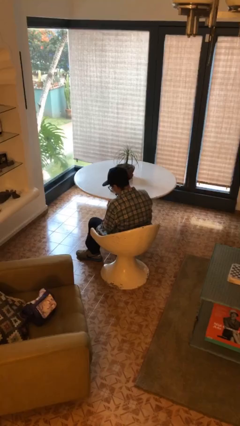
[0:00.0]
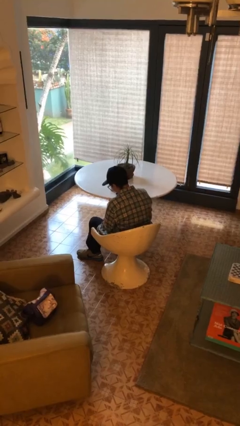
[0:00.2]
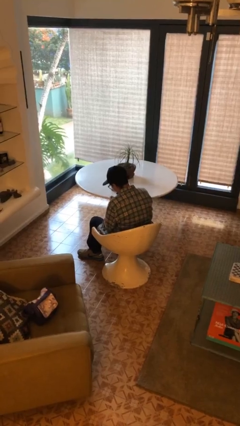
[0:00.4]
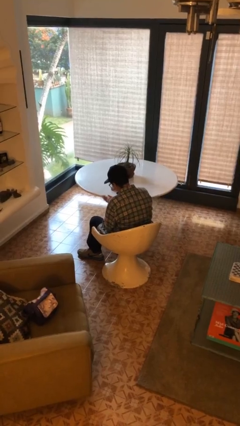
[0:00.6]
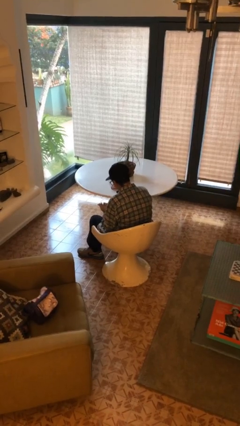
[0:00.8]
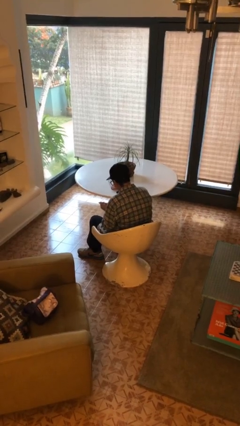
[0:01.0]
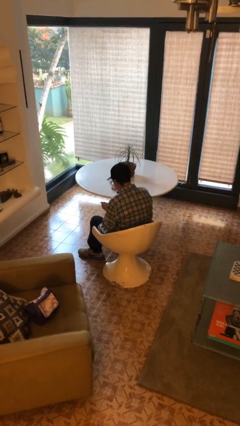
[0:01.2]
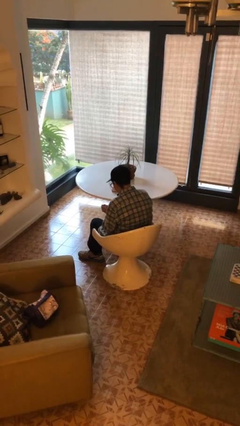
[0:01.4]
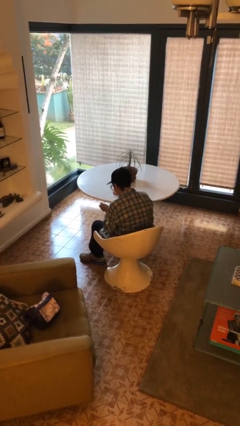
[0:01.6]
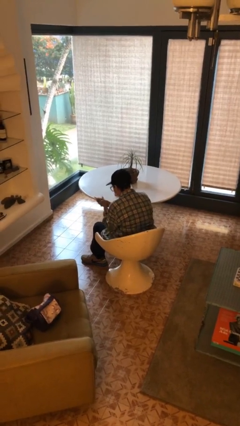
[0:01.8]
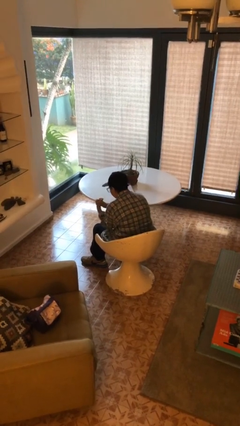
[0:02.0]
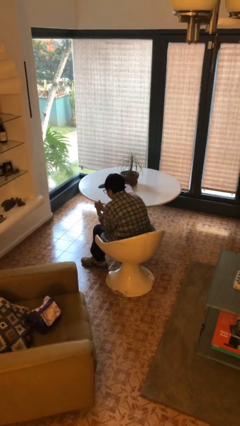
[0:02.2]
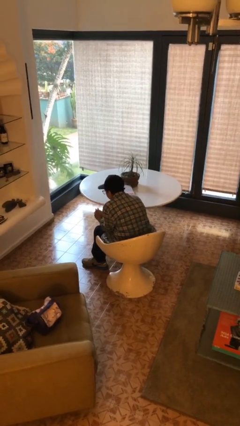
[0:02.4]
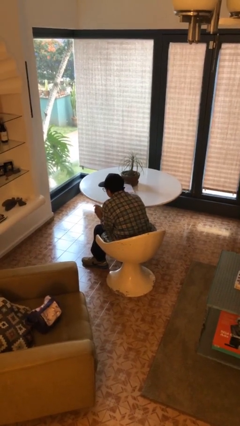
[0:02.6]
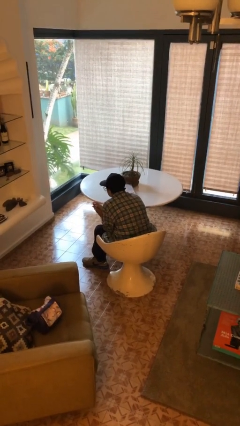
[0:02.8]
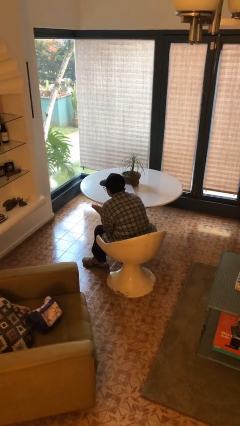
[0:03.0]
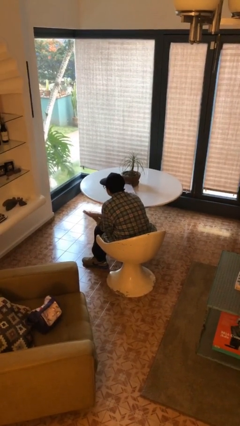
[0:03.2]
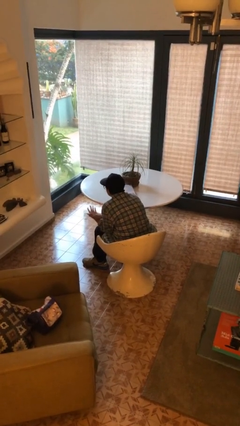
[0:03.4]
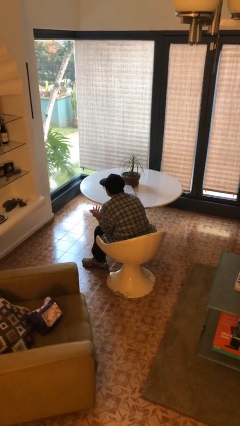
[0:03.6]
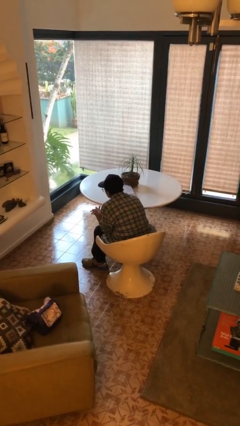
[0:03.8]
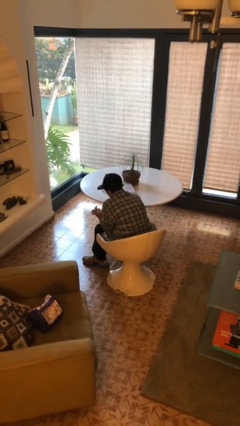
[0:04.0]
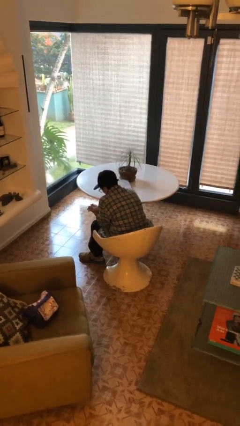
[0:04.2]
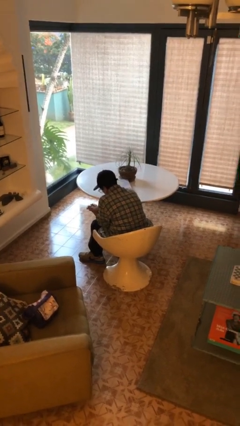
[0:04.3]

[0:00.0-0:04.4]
person looks at hands in lap

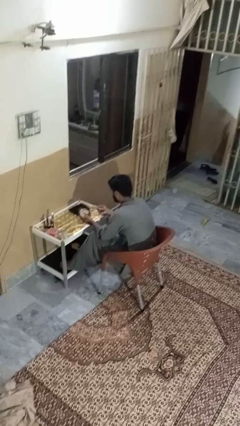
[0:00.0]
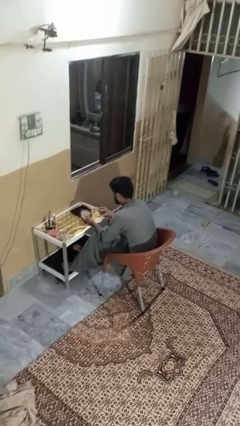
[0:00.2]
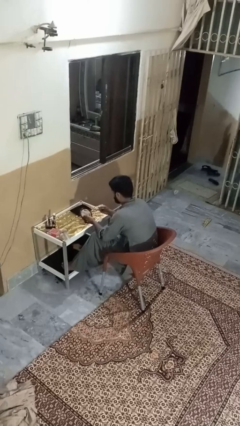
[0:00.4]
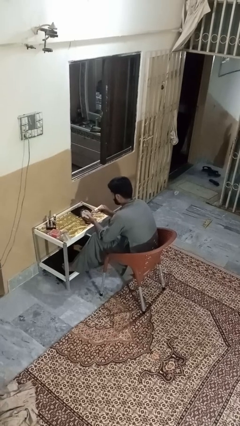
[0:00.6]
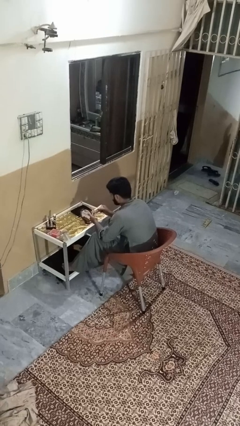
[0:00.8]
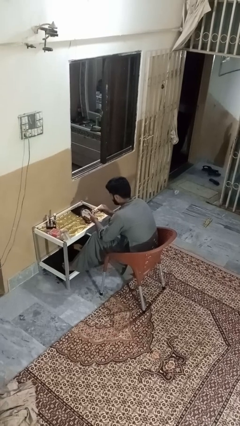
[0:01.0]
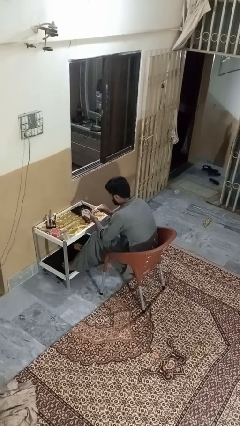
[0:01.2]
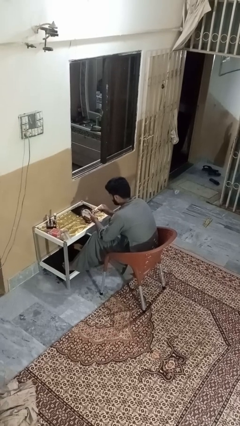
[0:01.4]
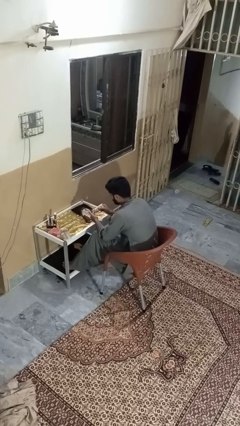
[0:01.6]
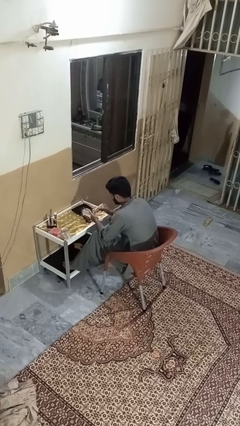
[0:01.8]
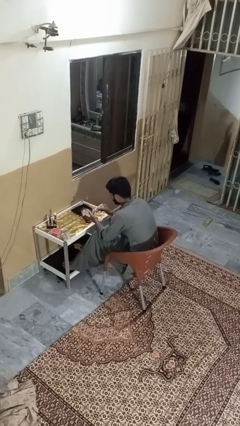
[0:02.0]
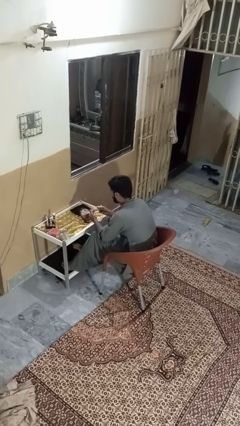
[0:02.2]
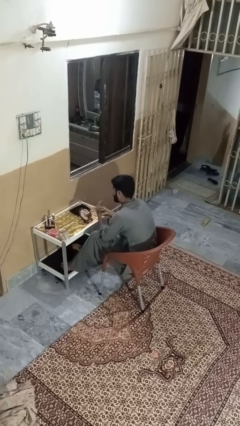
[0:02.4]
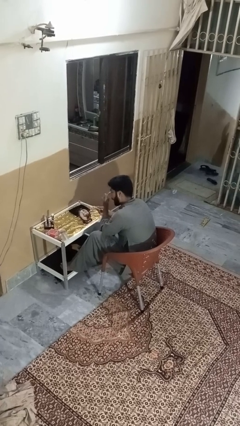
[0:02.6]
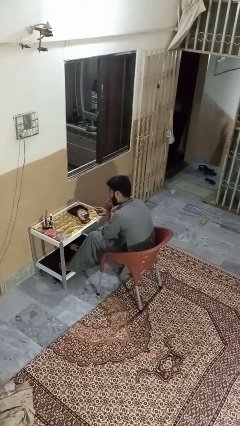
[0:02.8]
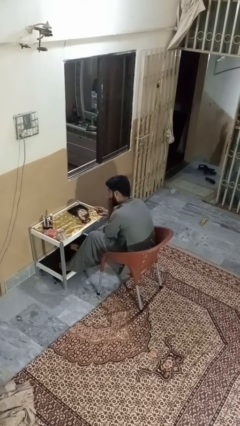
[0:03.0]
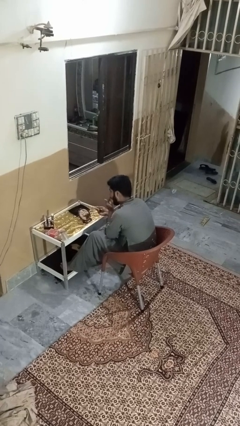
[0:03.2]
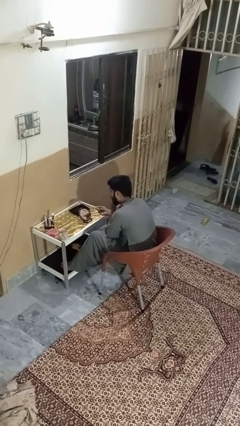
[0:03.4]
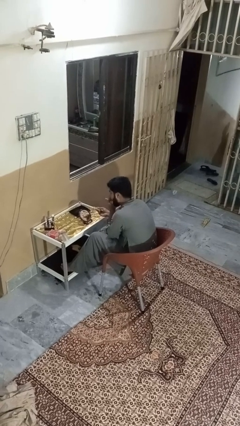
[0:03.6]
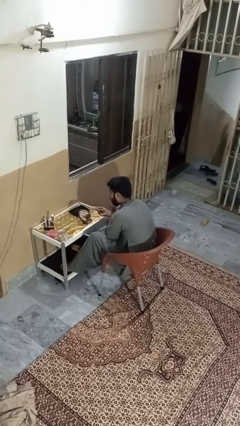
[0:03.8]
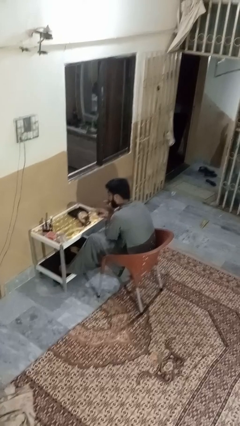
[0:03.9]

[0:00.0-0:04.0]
person applies foundation makeup

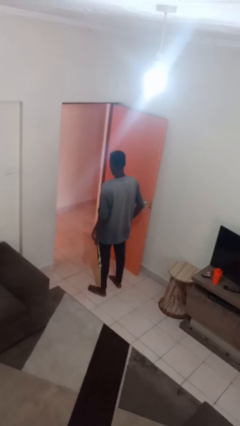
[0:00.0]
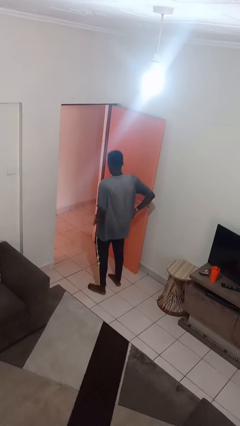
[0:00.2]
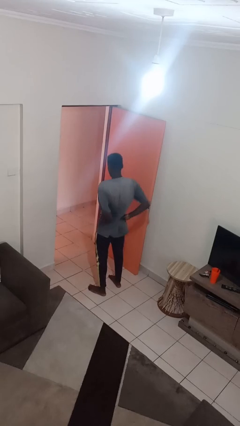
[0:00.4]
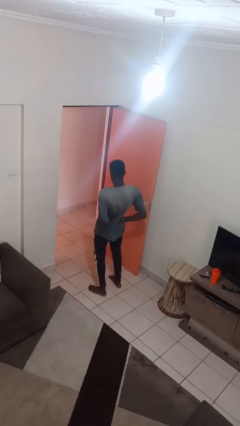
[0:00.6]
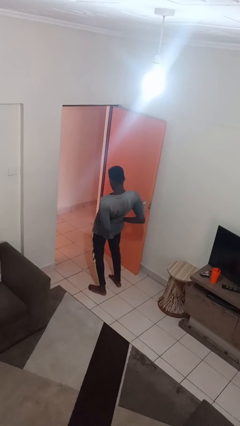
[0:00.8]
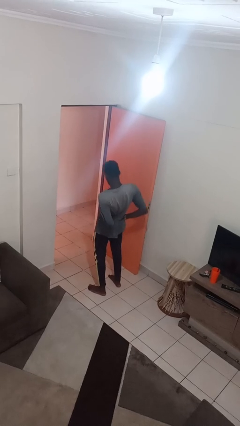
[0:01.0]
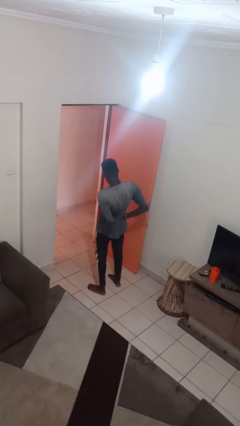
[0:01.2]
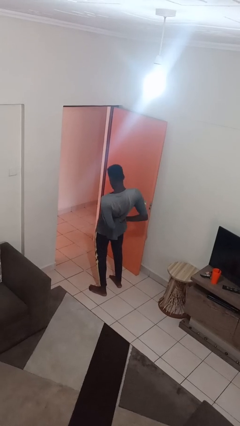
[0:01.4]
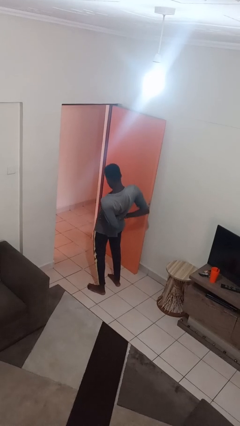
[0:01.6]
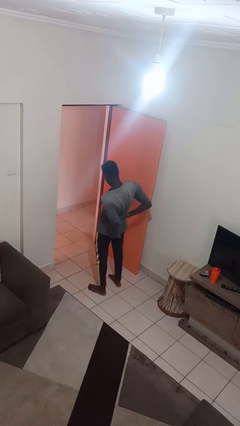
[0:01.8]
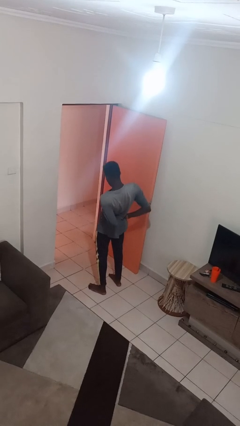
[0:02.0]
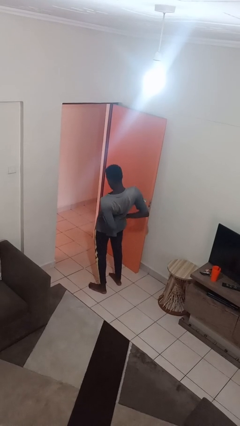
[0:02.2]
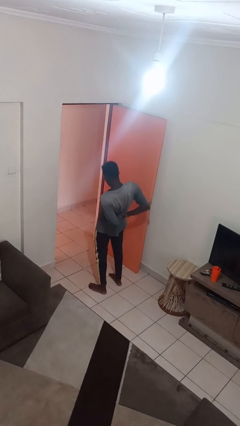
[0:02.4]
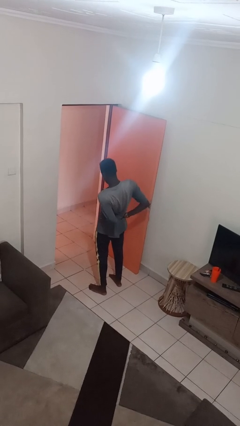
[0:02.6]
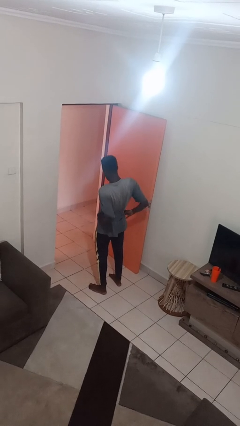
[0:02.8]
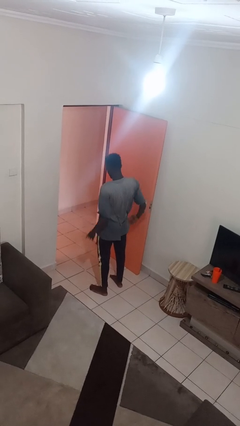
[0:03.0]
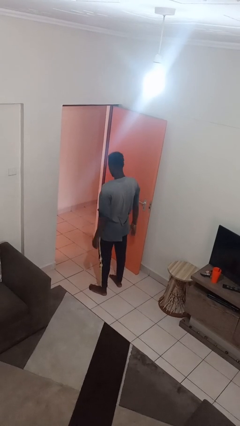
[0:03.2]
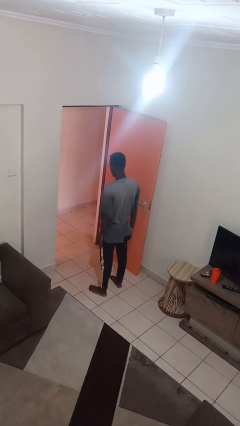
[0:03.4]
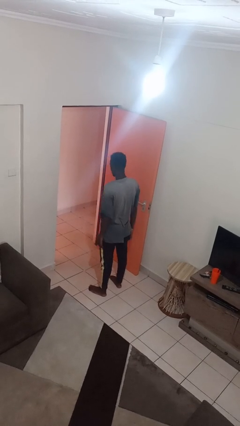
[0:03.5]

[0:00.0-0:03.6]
person stretches back

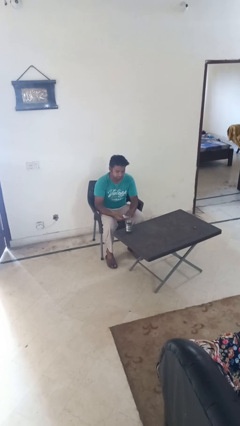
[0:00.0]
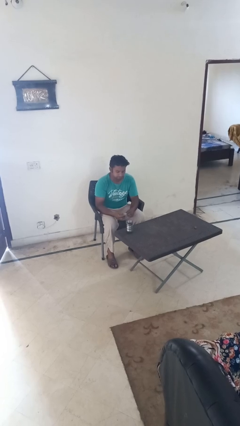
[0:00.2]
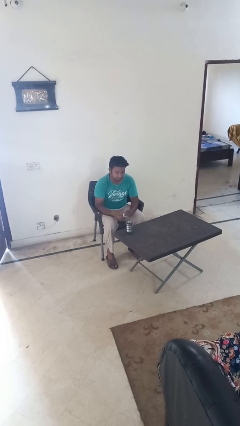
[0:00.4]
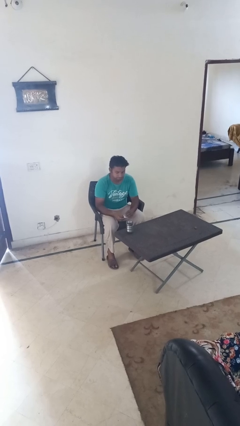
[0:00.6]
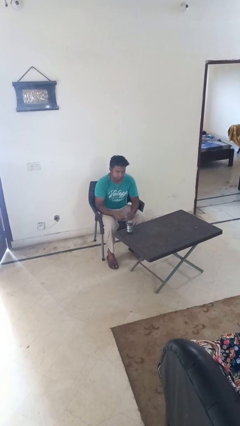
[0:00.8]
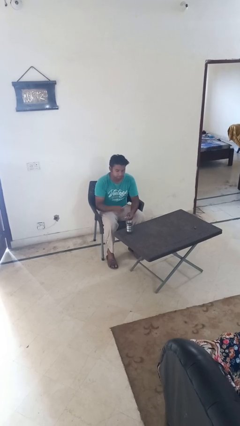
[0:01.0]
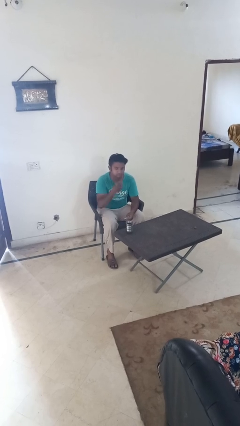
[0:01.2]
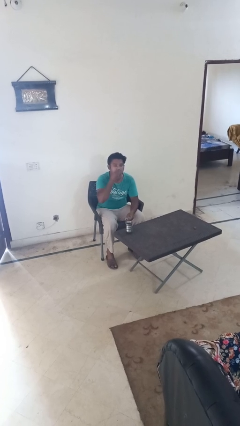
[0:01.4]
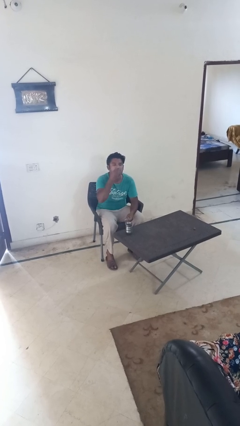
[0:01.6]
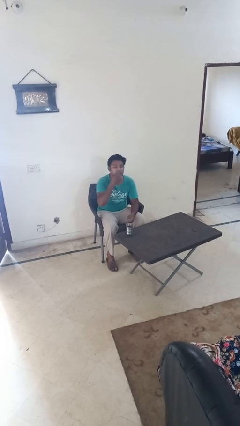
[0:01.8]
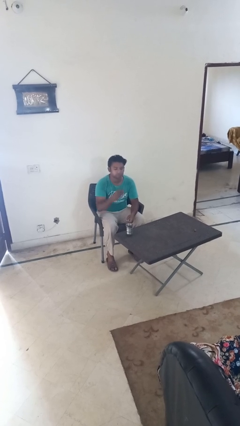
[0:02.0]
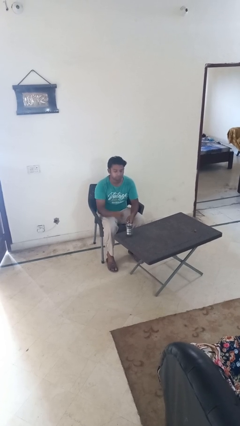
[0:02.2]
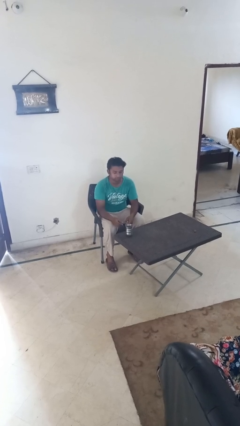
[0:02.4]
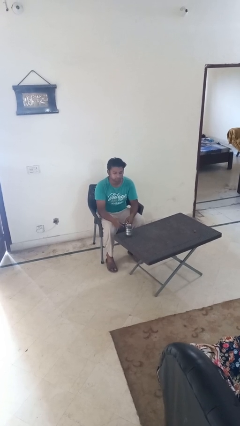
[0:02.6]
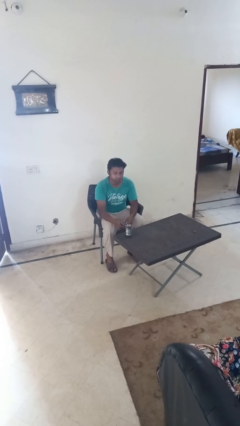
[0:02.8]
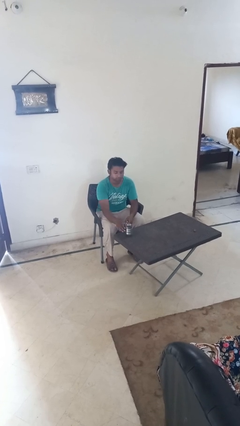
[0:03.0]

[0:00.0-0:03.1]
person takes medicine pills

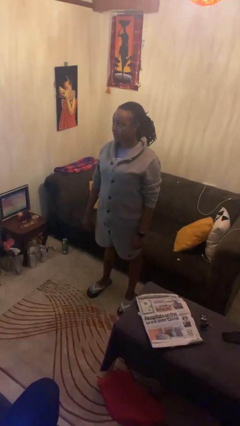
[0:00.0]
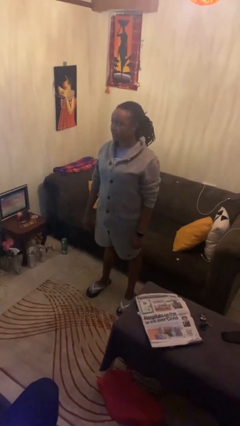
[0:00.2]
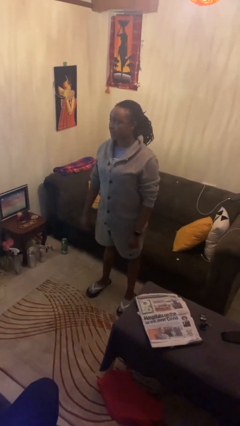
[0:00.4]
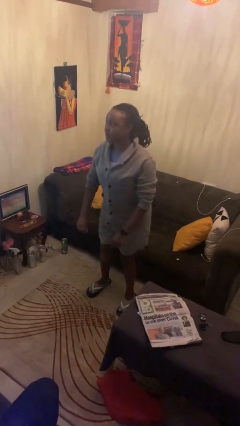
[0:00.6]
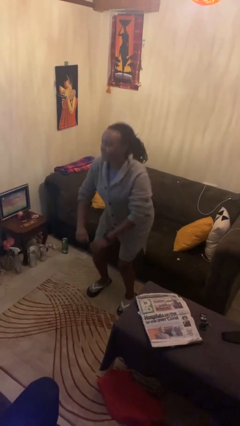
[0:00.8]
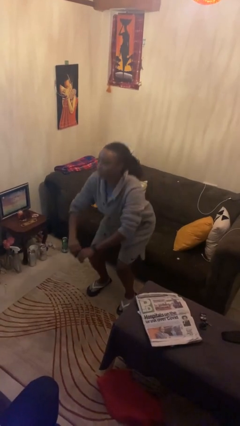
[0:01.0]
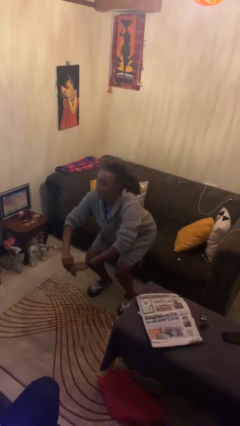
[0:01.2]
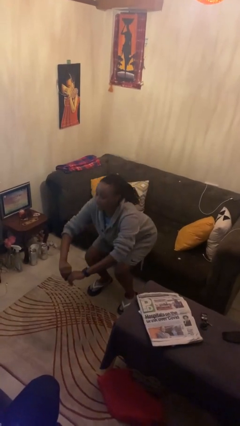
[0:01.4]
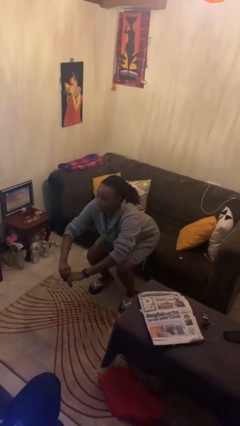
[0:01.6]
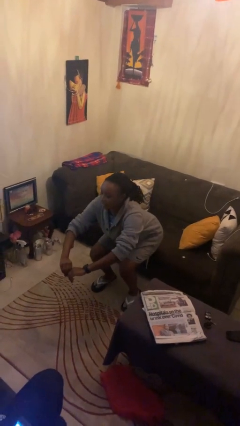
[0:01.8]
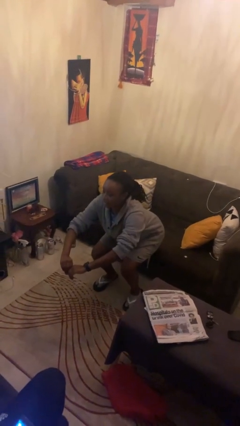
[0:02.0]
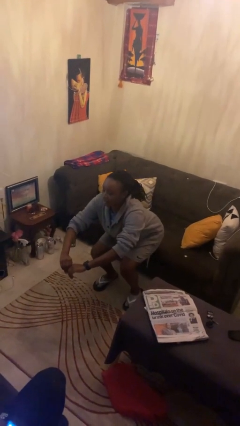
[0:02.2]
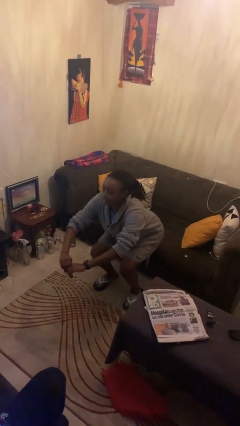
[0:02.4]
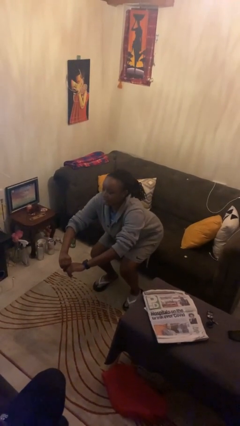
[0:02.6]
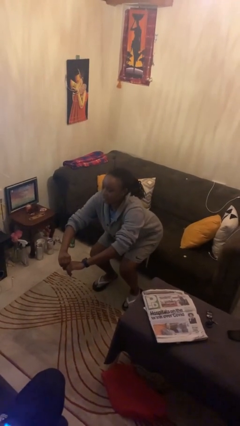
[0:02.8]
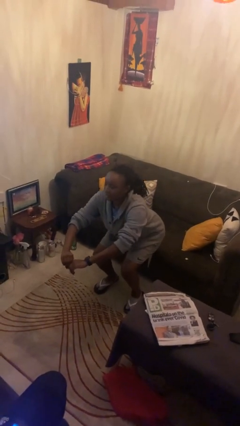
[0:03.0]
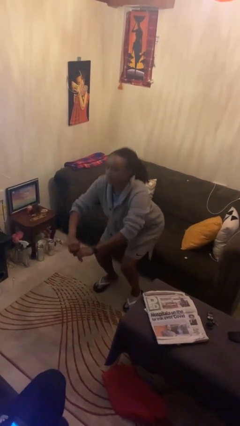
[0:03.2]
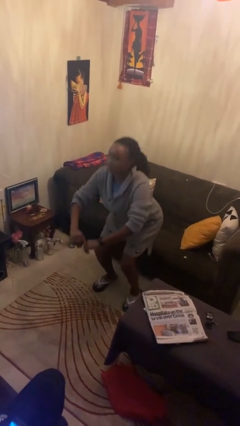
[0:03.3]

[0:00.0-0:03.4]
person squats
